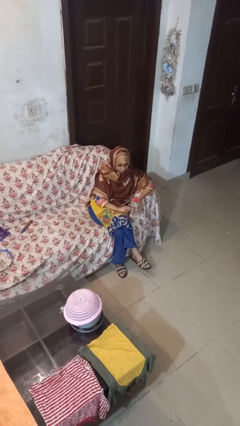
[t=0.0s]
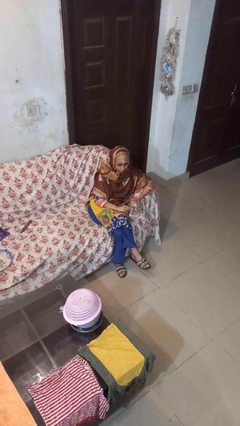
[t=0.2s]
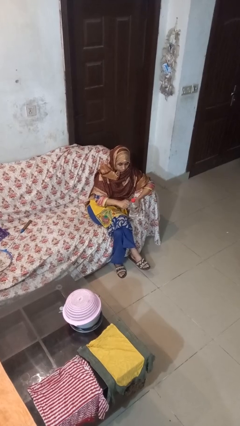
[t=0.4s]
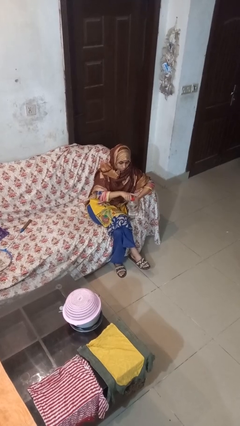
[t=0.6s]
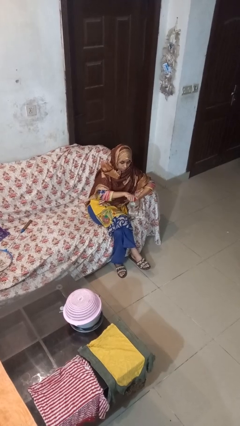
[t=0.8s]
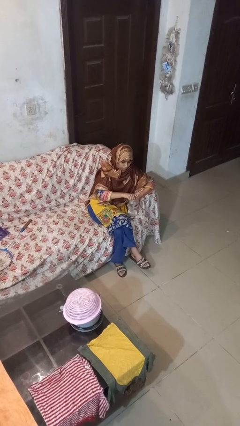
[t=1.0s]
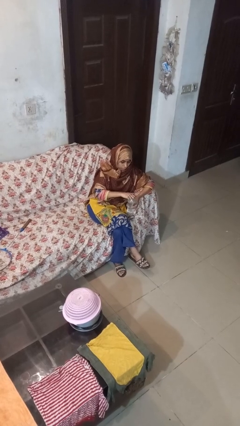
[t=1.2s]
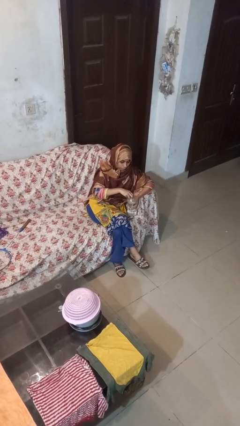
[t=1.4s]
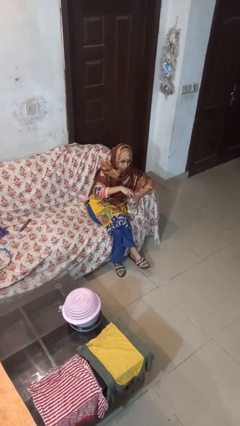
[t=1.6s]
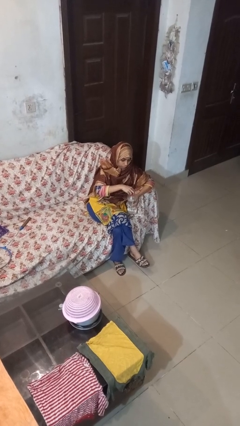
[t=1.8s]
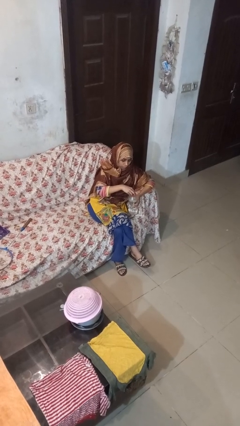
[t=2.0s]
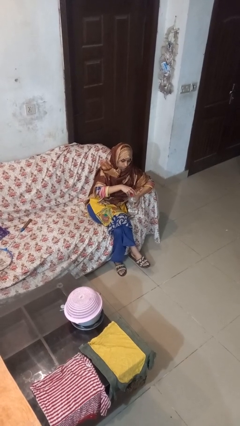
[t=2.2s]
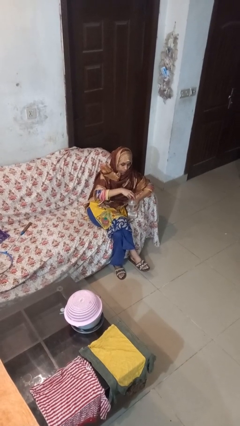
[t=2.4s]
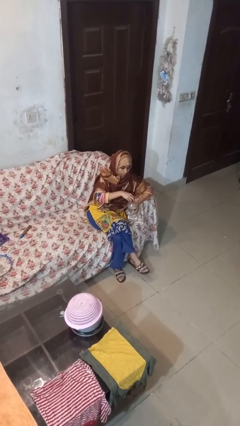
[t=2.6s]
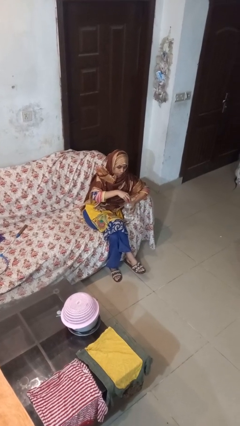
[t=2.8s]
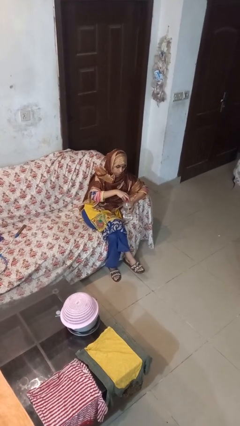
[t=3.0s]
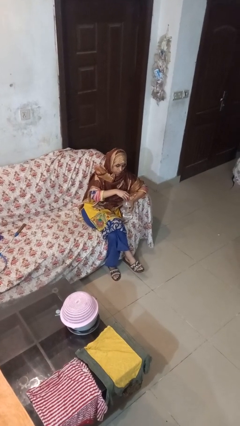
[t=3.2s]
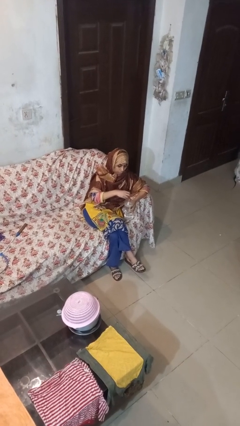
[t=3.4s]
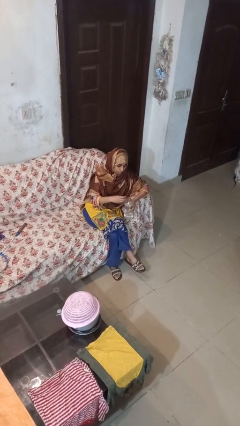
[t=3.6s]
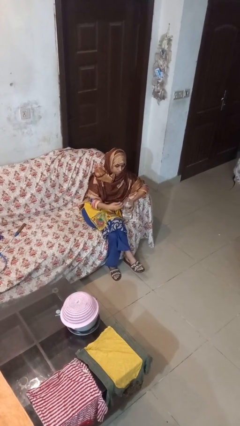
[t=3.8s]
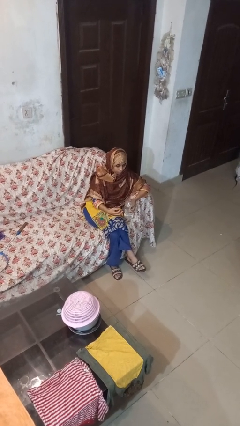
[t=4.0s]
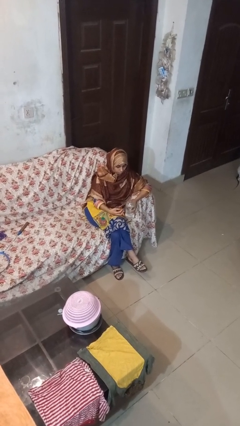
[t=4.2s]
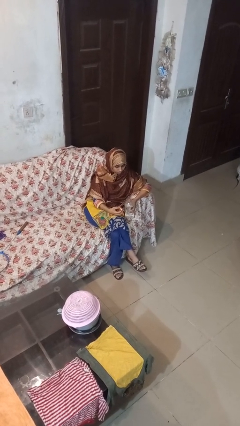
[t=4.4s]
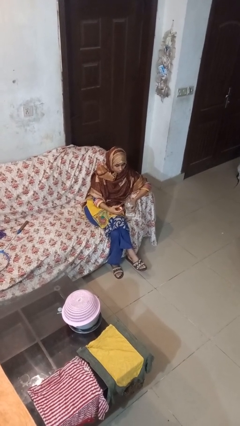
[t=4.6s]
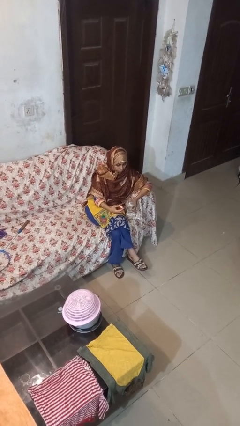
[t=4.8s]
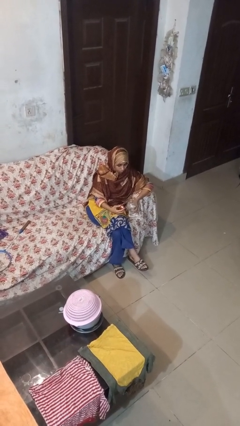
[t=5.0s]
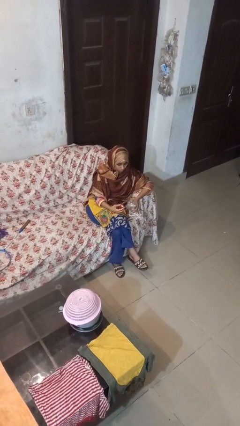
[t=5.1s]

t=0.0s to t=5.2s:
person unscrews lid from bottle

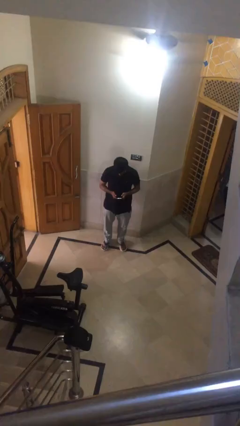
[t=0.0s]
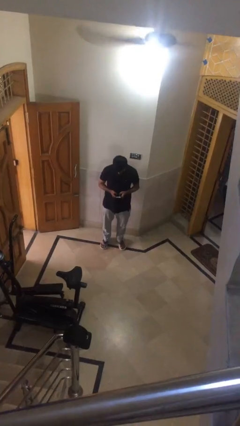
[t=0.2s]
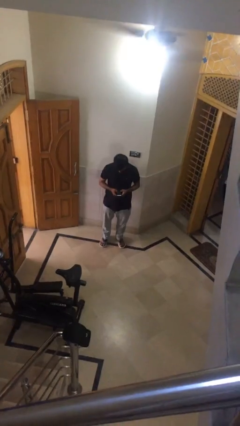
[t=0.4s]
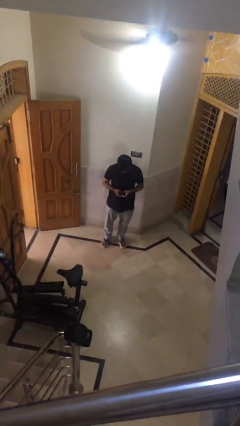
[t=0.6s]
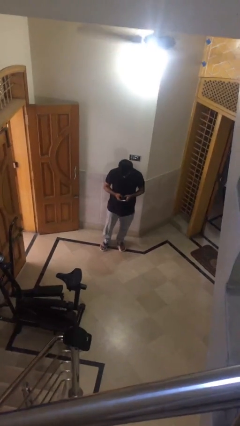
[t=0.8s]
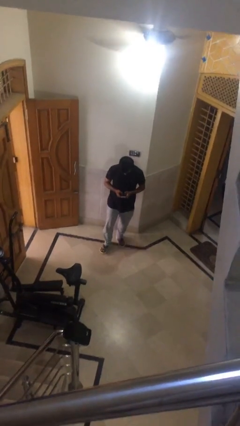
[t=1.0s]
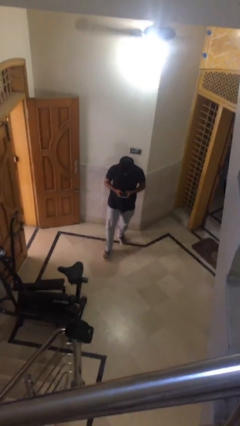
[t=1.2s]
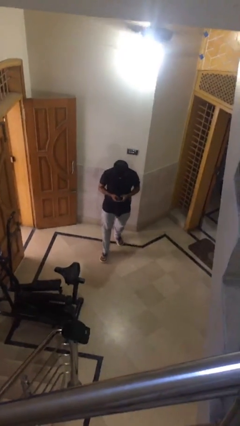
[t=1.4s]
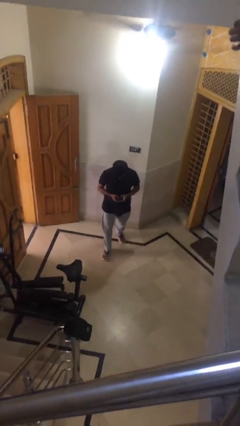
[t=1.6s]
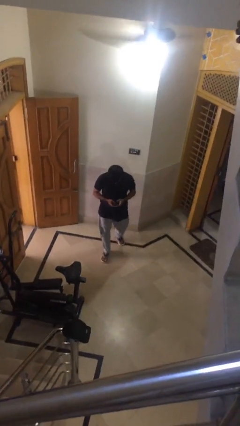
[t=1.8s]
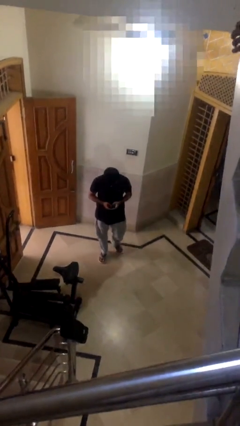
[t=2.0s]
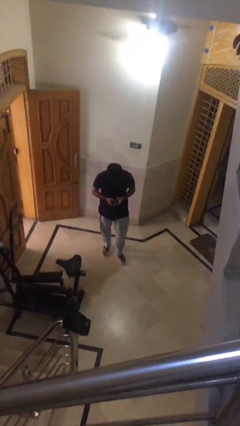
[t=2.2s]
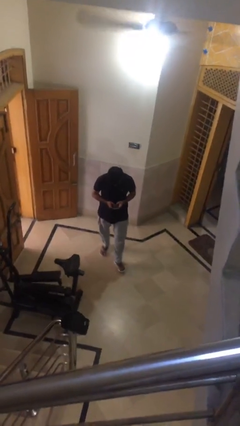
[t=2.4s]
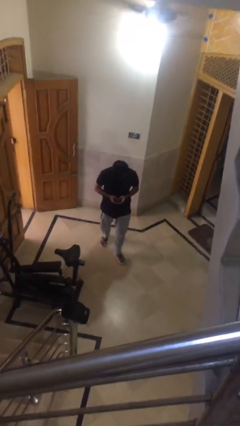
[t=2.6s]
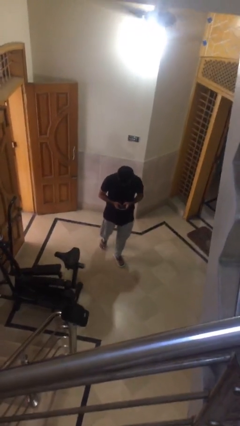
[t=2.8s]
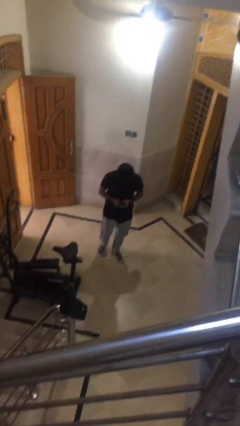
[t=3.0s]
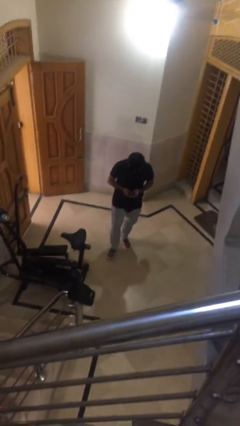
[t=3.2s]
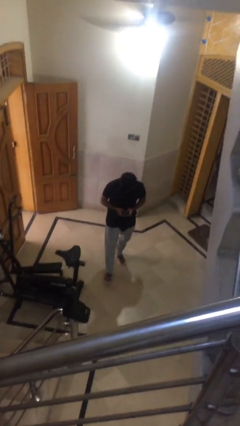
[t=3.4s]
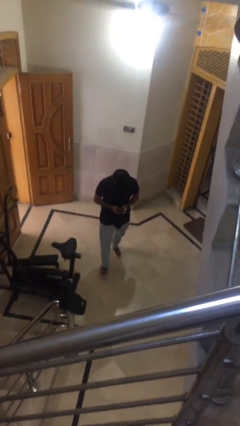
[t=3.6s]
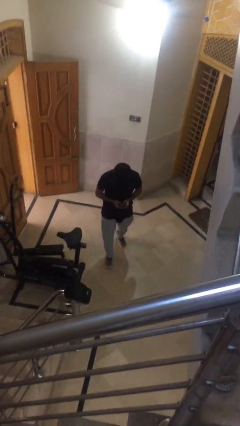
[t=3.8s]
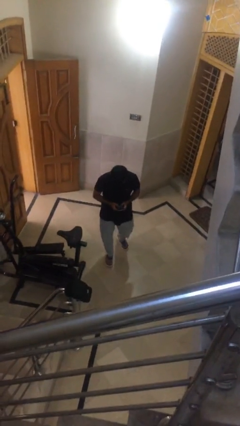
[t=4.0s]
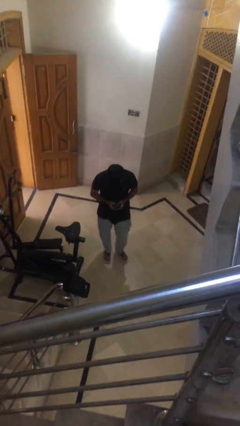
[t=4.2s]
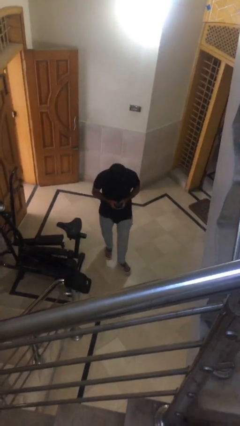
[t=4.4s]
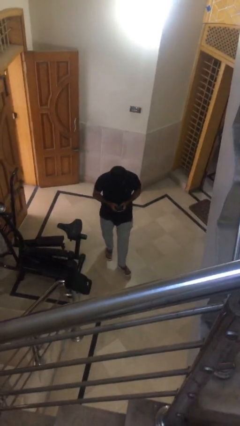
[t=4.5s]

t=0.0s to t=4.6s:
person texts on phone

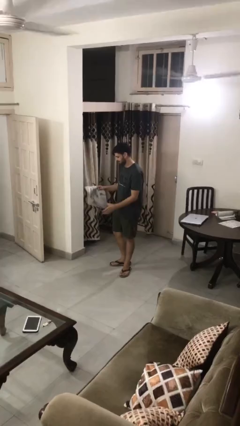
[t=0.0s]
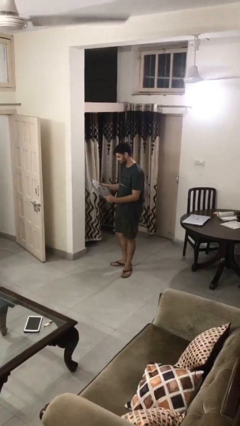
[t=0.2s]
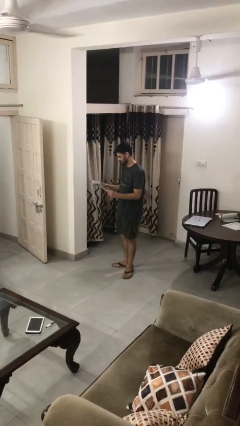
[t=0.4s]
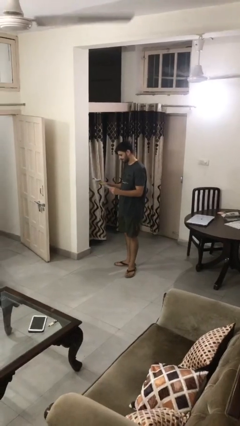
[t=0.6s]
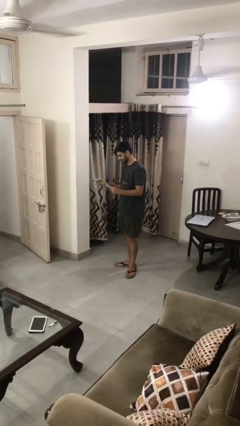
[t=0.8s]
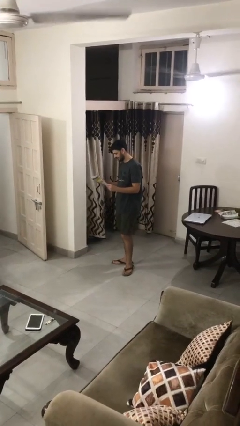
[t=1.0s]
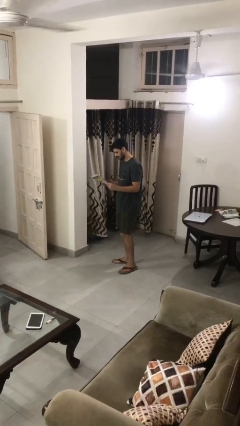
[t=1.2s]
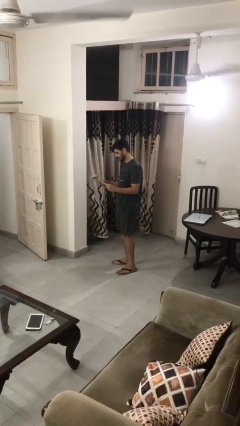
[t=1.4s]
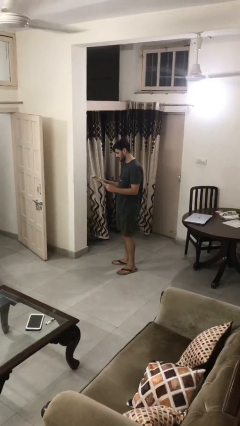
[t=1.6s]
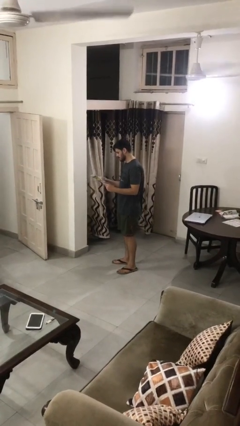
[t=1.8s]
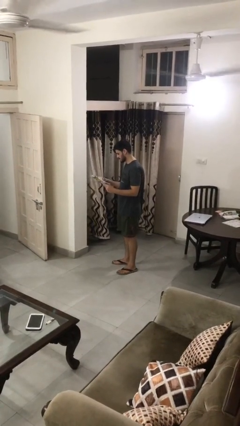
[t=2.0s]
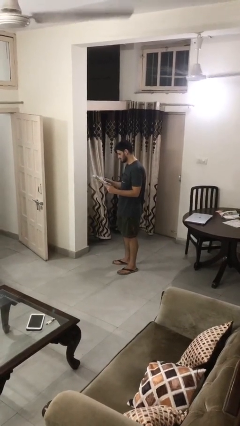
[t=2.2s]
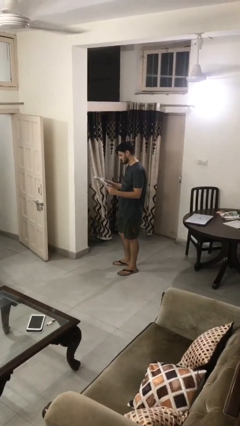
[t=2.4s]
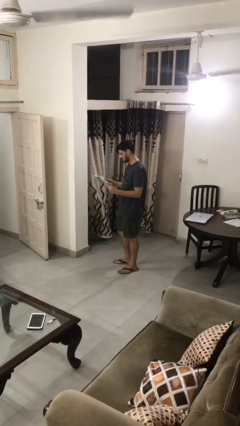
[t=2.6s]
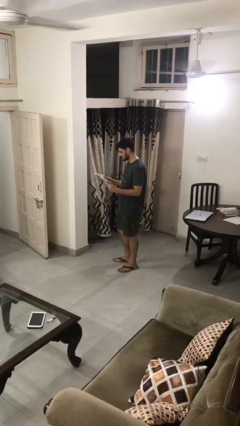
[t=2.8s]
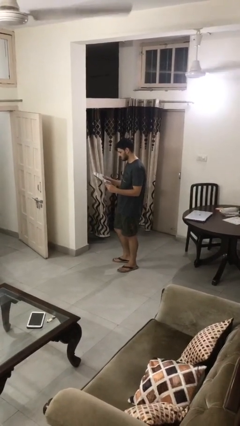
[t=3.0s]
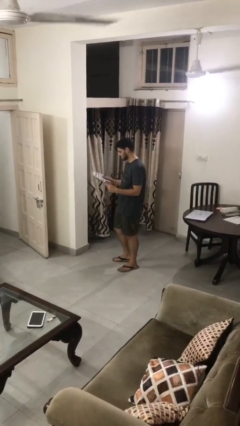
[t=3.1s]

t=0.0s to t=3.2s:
person reads newspaper

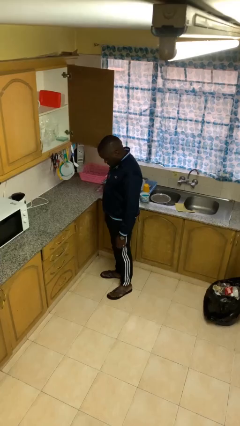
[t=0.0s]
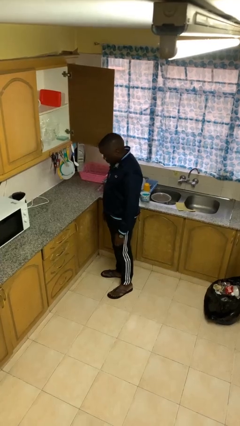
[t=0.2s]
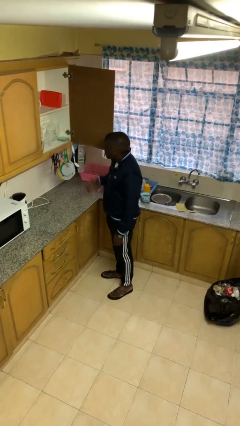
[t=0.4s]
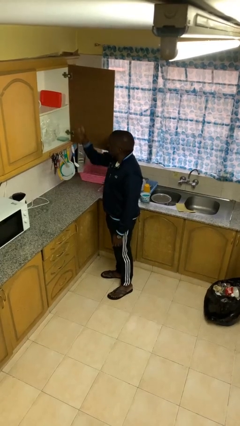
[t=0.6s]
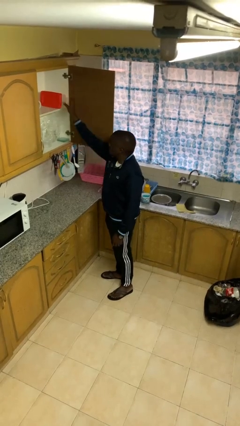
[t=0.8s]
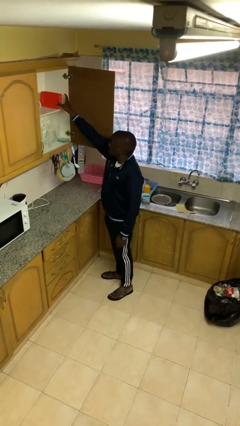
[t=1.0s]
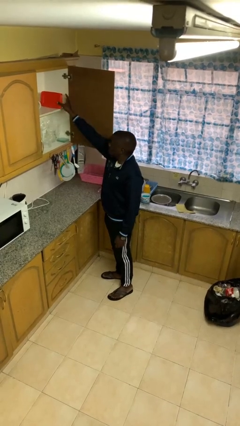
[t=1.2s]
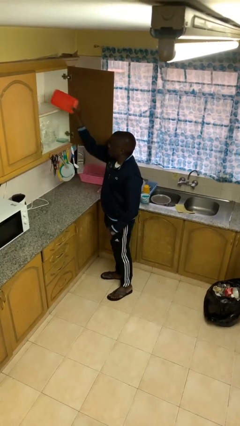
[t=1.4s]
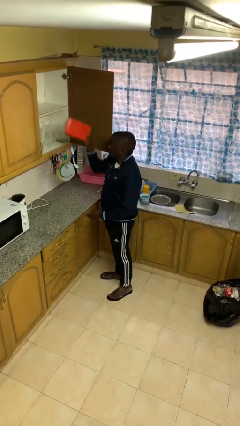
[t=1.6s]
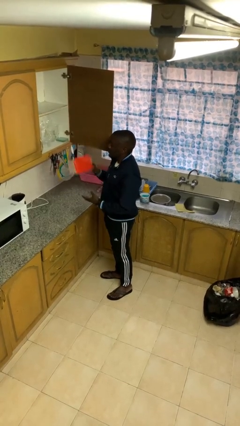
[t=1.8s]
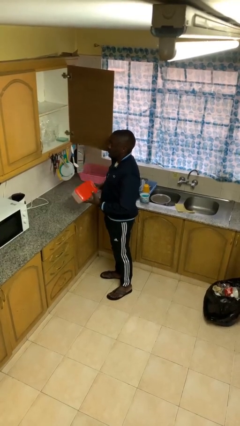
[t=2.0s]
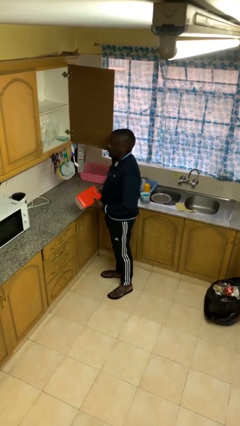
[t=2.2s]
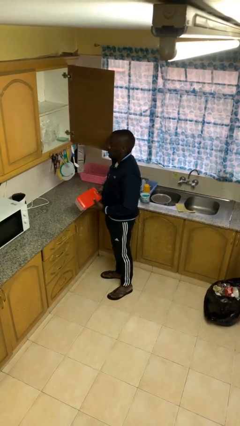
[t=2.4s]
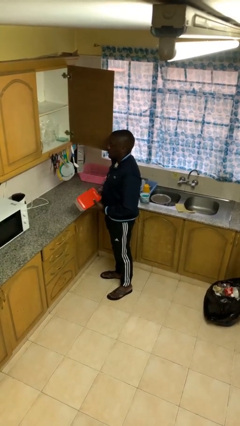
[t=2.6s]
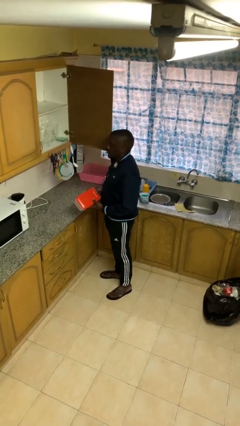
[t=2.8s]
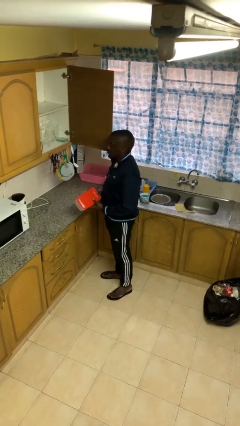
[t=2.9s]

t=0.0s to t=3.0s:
person picks up object from shelf

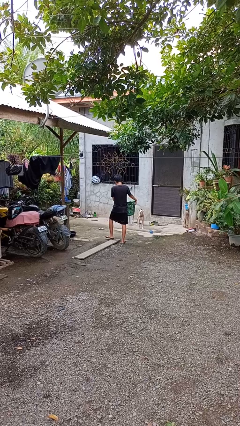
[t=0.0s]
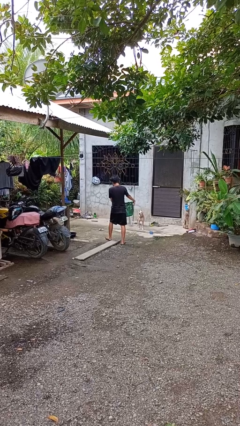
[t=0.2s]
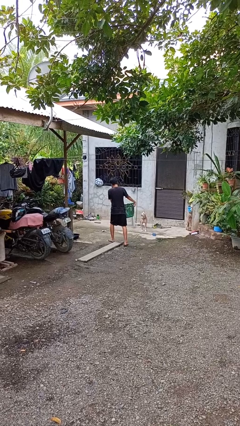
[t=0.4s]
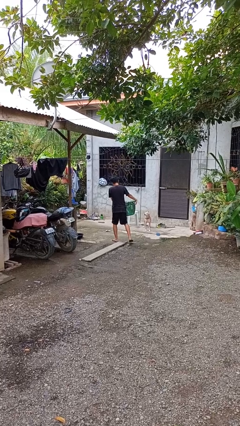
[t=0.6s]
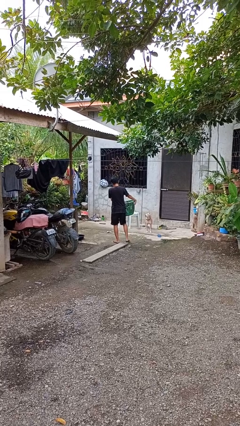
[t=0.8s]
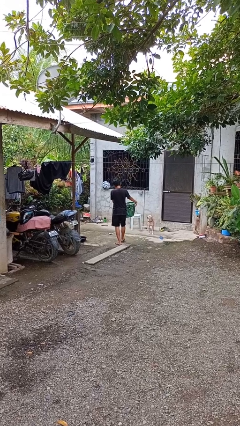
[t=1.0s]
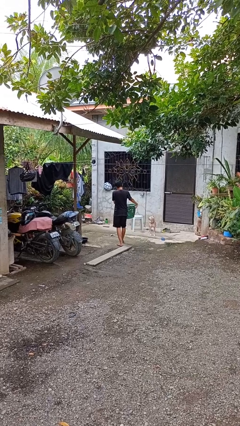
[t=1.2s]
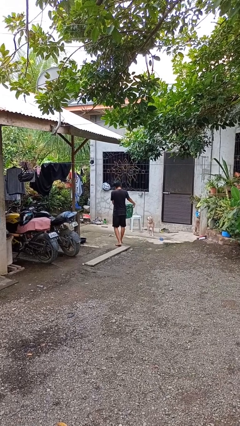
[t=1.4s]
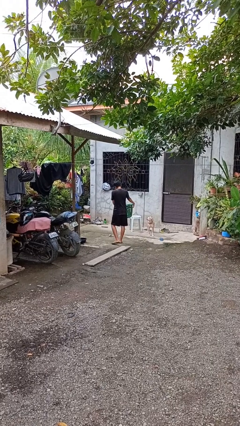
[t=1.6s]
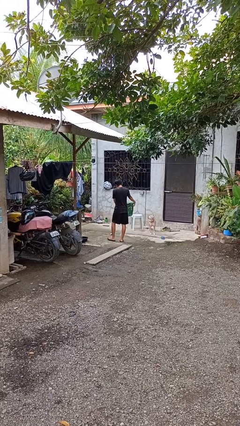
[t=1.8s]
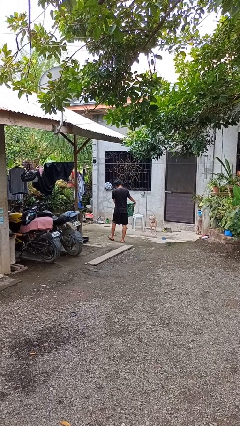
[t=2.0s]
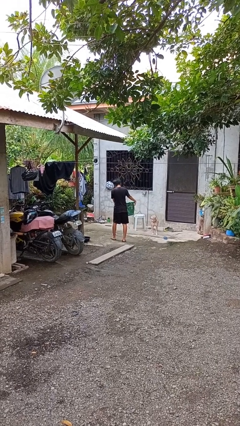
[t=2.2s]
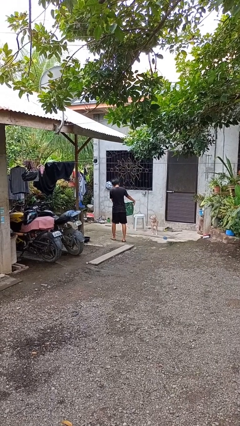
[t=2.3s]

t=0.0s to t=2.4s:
person carries laundry basket
